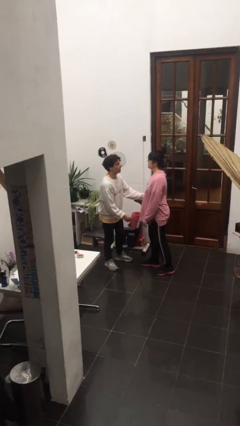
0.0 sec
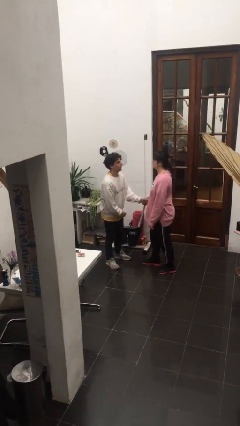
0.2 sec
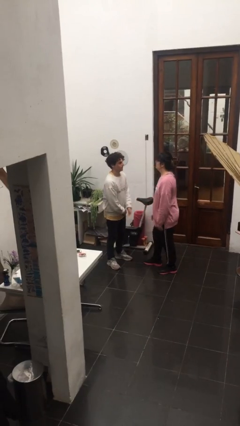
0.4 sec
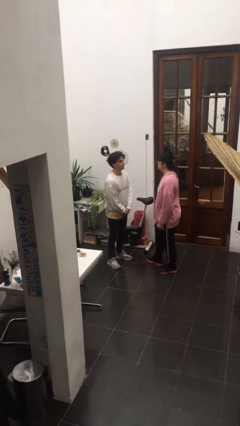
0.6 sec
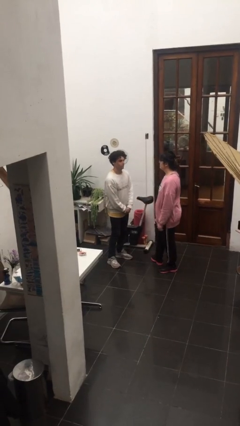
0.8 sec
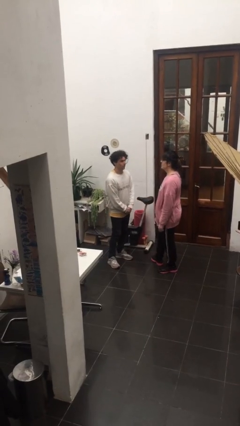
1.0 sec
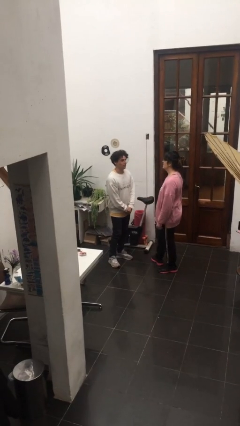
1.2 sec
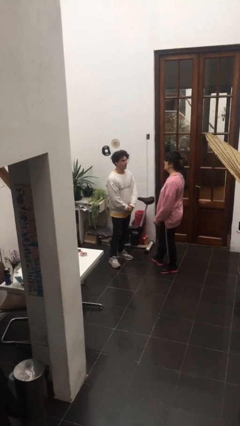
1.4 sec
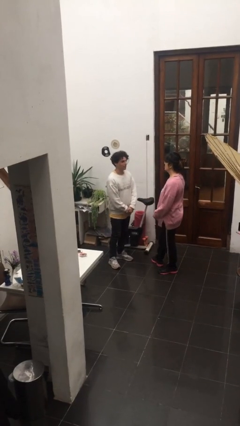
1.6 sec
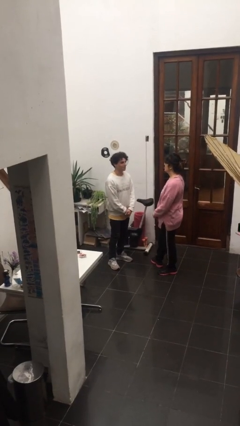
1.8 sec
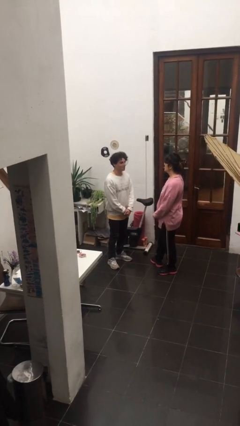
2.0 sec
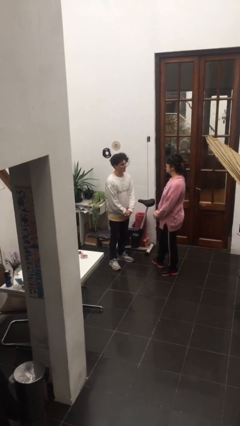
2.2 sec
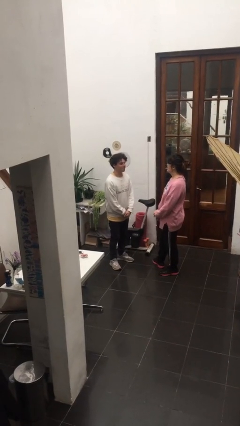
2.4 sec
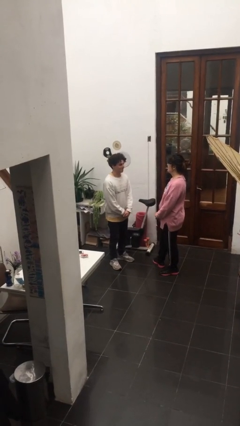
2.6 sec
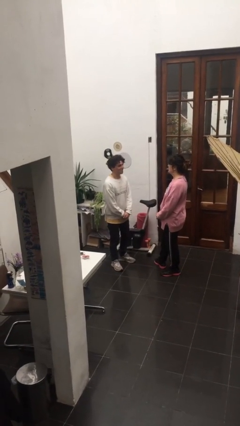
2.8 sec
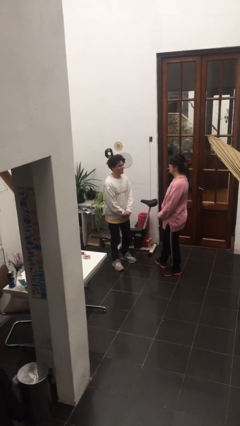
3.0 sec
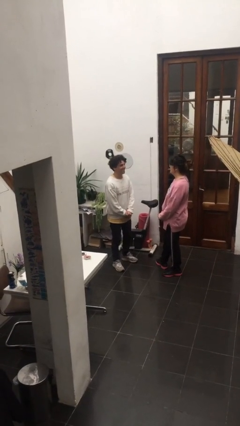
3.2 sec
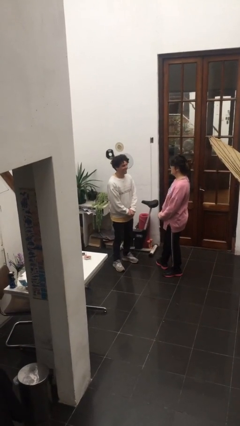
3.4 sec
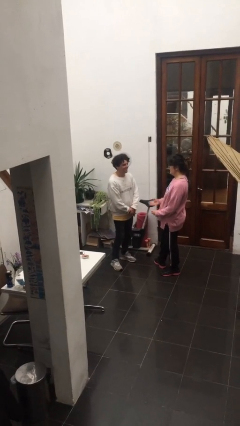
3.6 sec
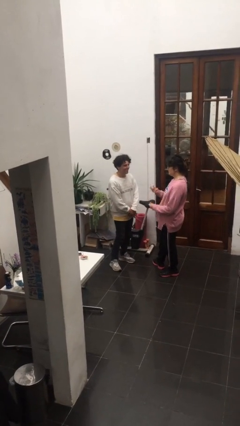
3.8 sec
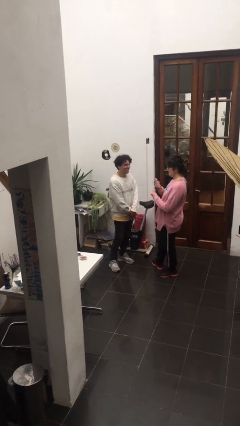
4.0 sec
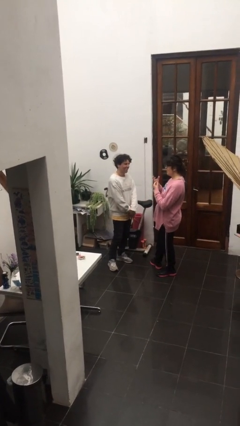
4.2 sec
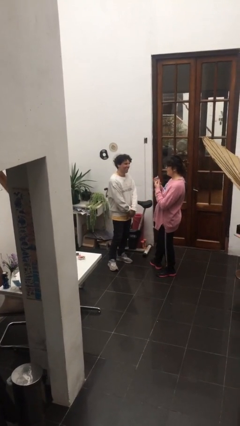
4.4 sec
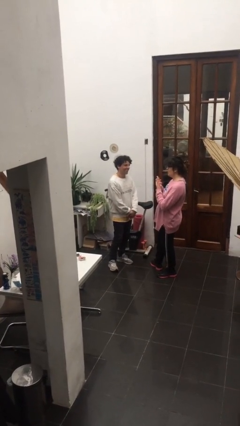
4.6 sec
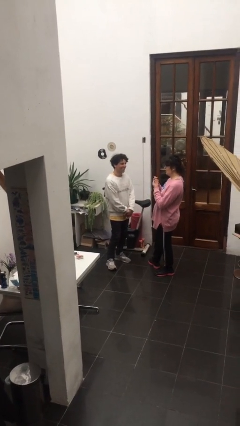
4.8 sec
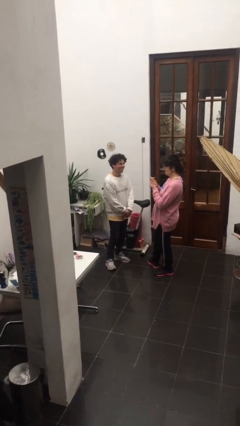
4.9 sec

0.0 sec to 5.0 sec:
person talks to person

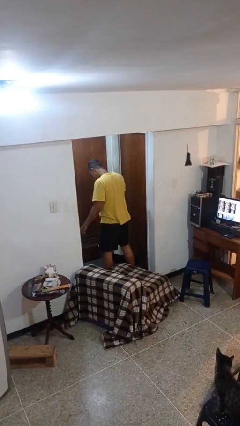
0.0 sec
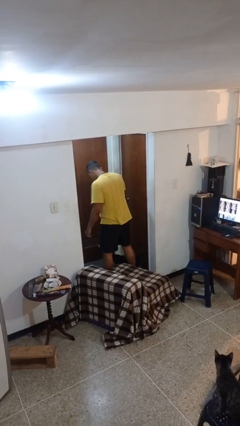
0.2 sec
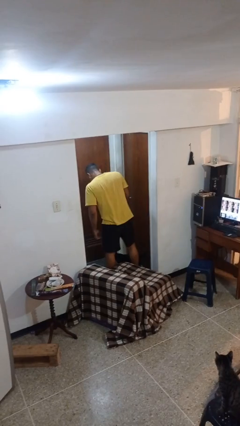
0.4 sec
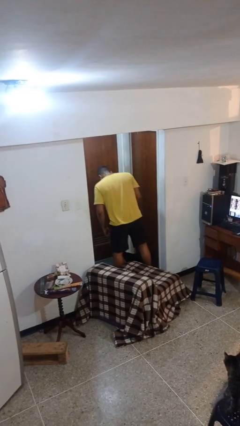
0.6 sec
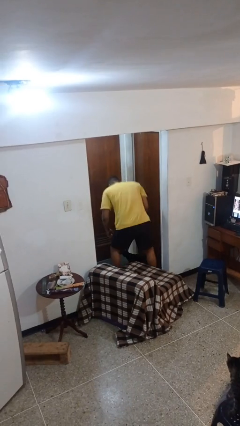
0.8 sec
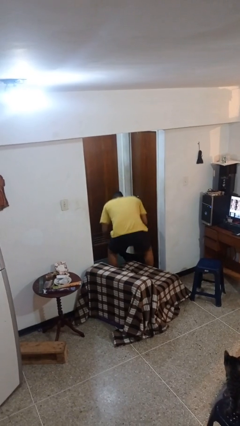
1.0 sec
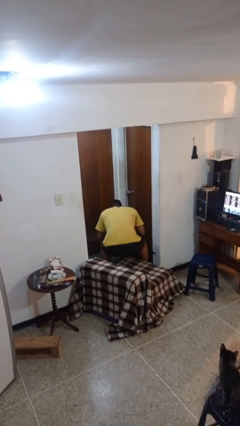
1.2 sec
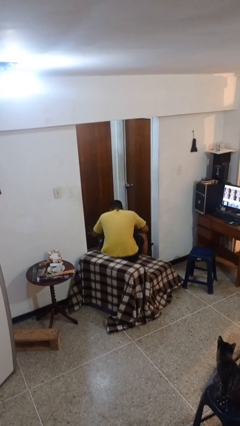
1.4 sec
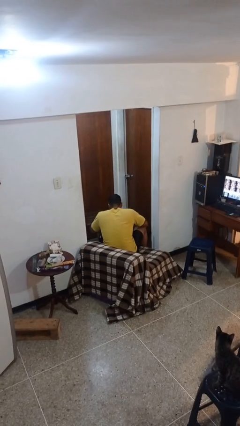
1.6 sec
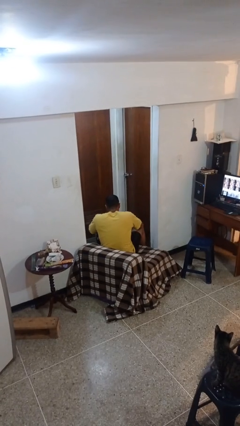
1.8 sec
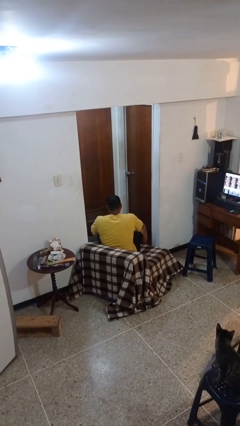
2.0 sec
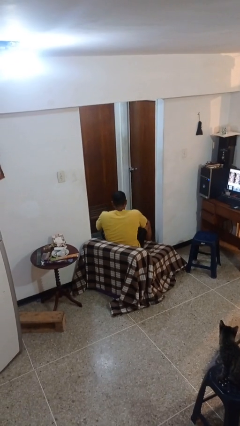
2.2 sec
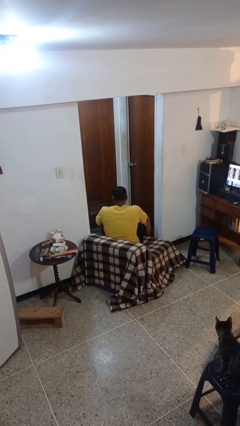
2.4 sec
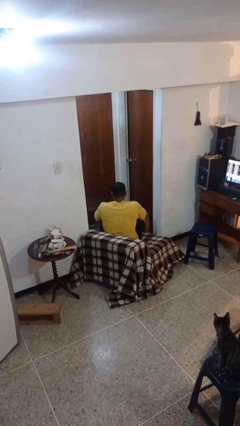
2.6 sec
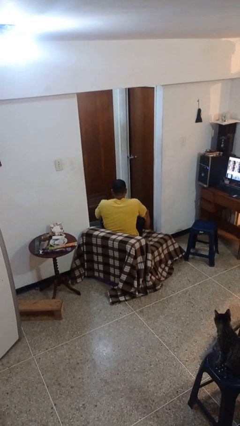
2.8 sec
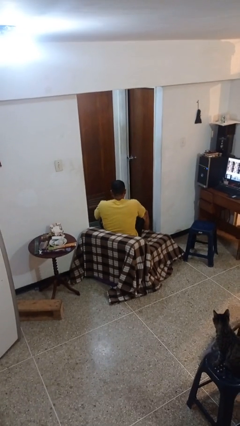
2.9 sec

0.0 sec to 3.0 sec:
person lies down on couch

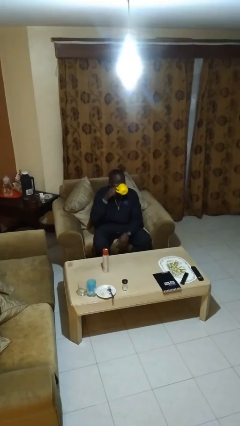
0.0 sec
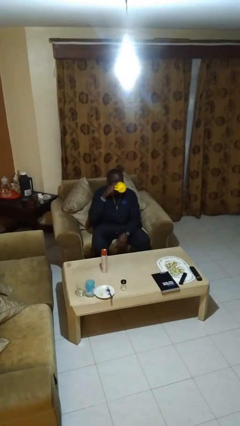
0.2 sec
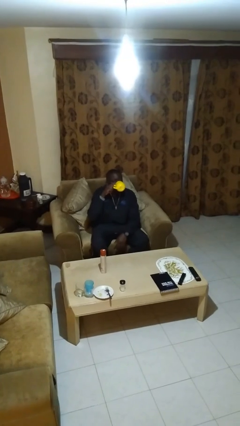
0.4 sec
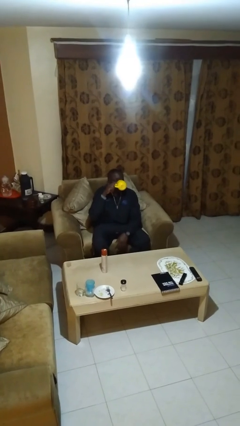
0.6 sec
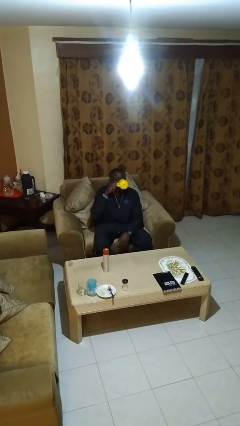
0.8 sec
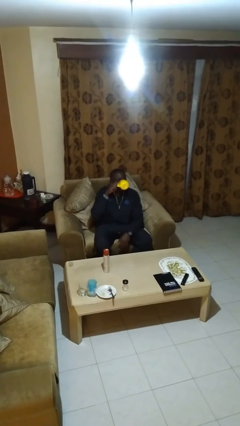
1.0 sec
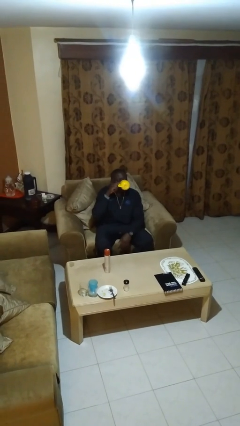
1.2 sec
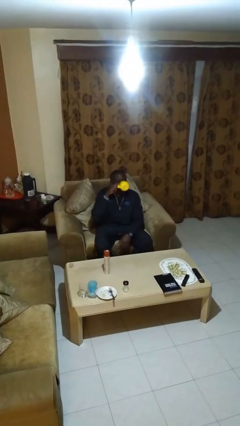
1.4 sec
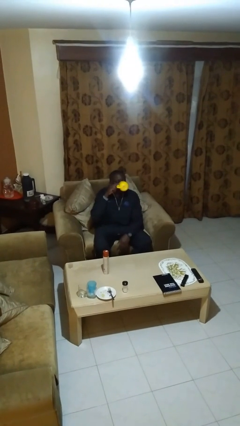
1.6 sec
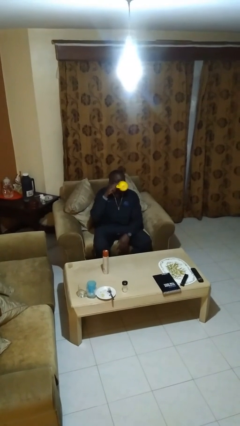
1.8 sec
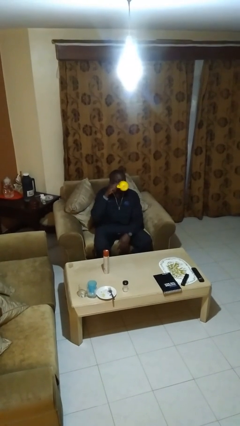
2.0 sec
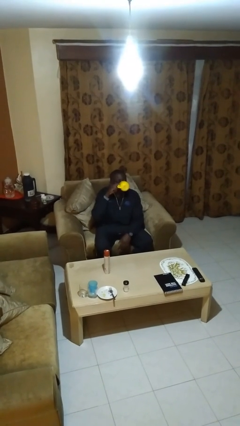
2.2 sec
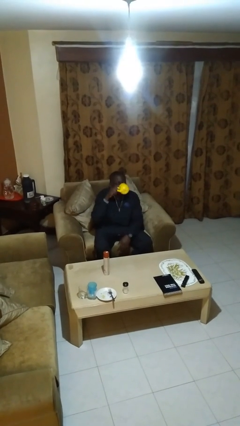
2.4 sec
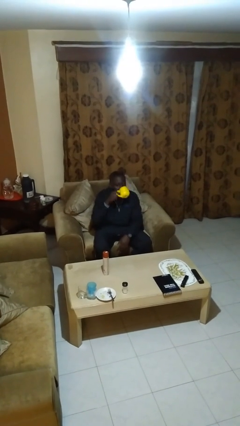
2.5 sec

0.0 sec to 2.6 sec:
person drinks from mug

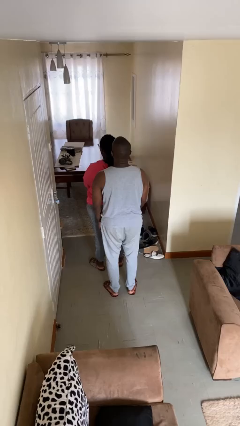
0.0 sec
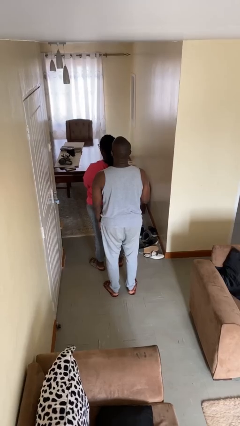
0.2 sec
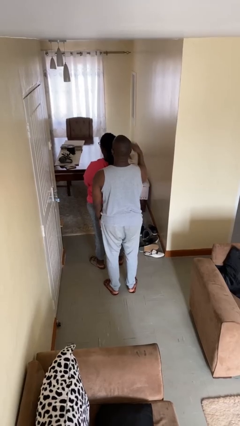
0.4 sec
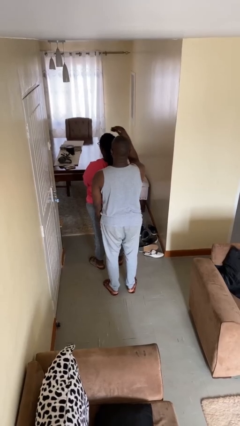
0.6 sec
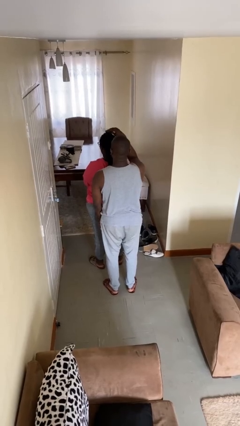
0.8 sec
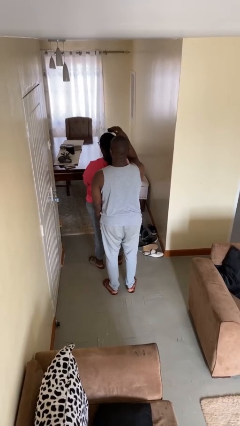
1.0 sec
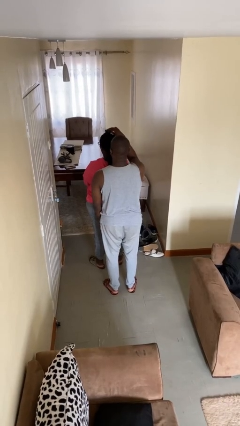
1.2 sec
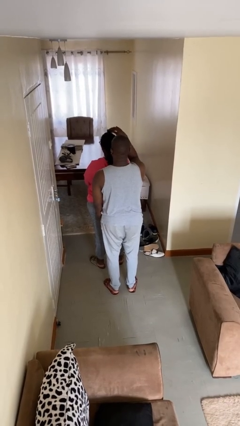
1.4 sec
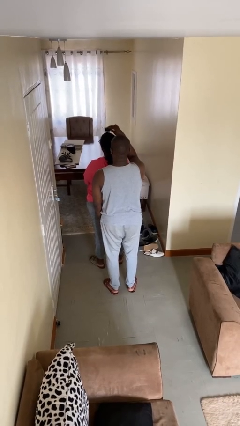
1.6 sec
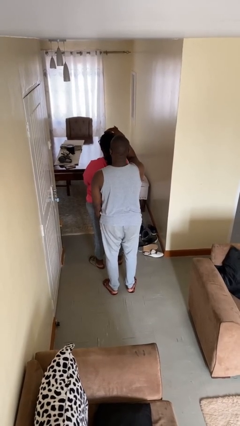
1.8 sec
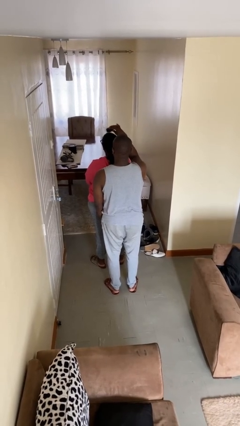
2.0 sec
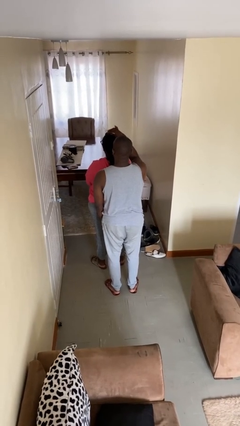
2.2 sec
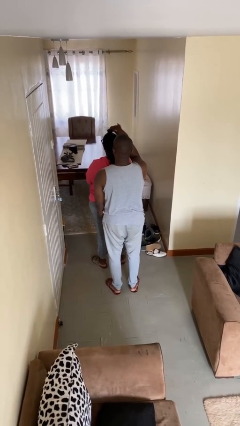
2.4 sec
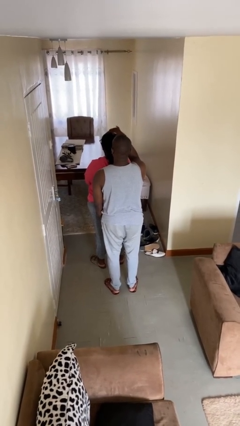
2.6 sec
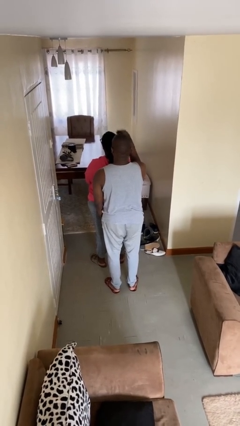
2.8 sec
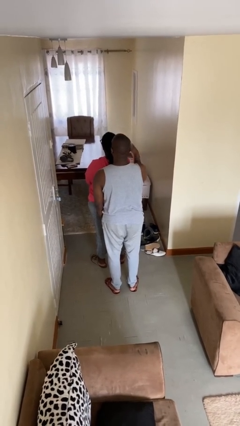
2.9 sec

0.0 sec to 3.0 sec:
person brushes hair of person

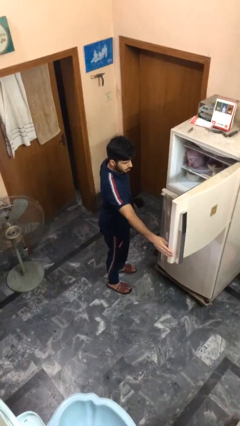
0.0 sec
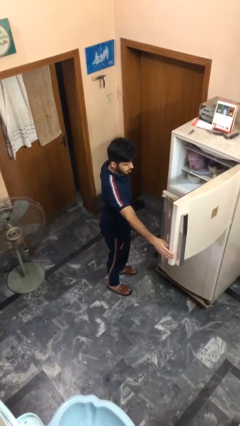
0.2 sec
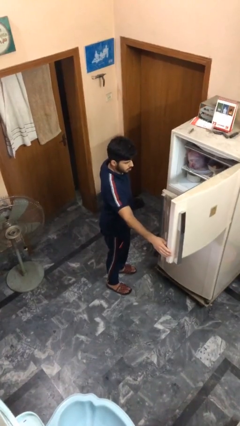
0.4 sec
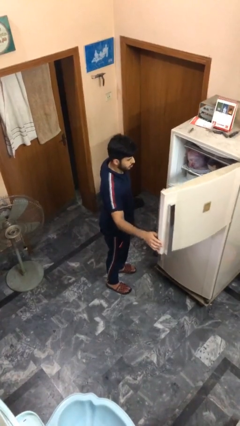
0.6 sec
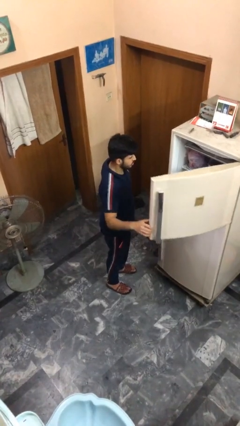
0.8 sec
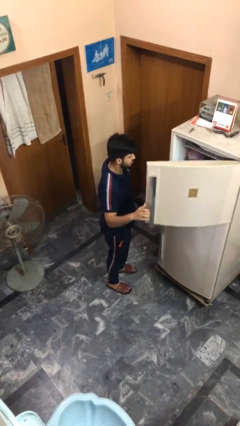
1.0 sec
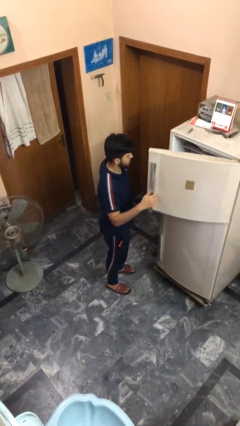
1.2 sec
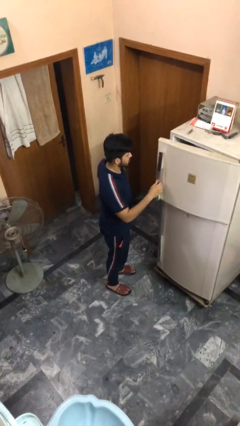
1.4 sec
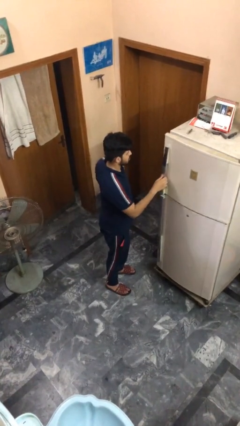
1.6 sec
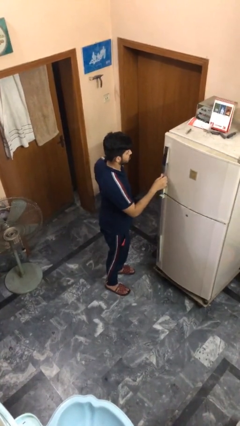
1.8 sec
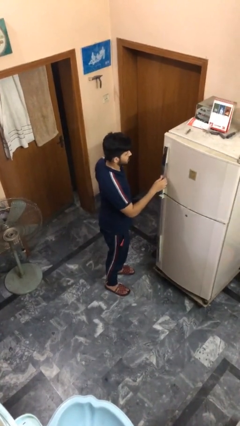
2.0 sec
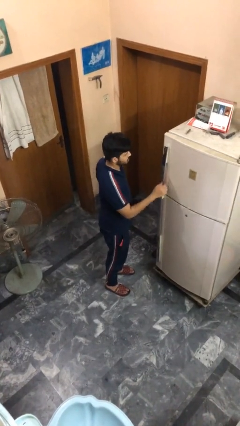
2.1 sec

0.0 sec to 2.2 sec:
person closes refrigerator

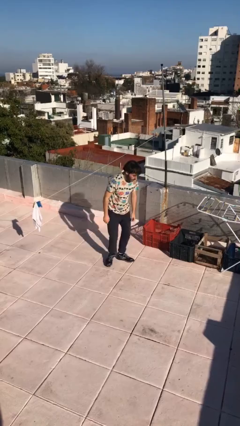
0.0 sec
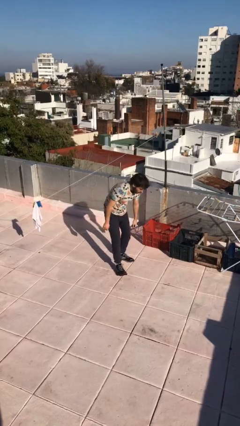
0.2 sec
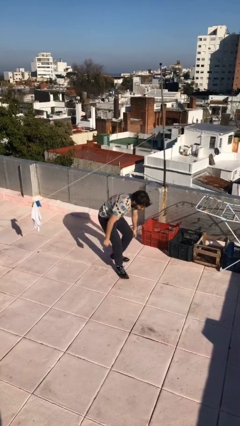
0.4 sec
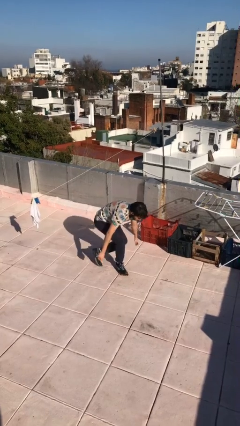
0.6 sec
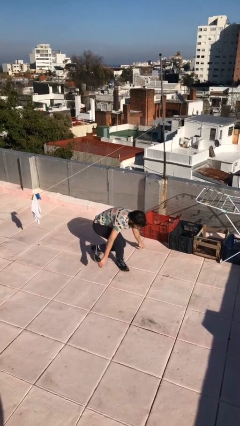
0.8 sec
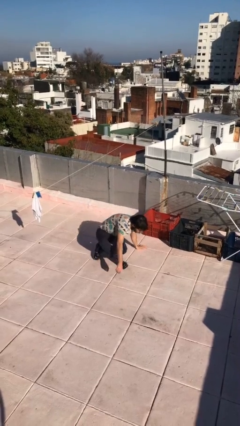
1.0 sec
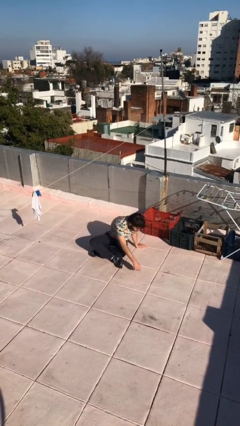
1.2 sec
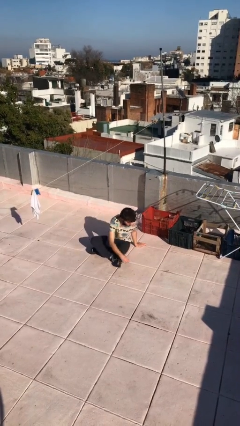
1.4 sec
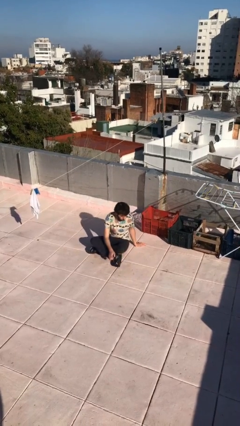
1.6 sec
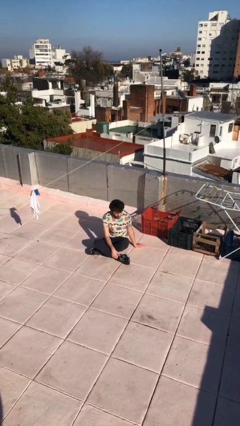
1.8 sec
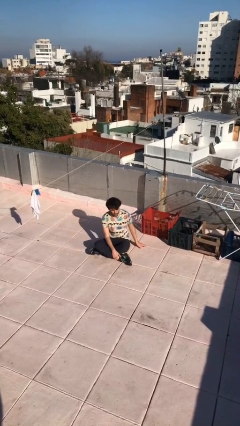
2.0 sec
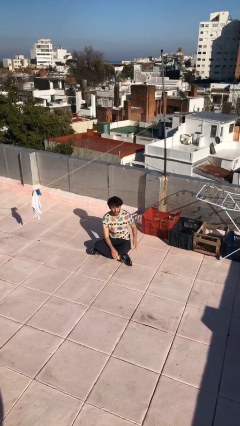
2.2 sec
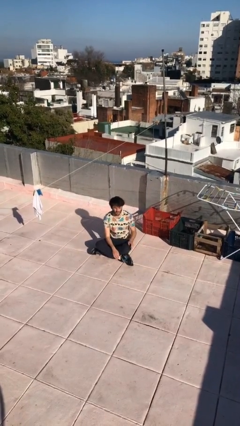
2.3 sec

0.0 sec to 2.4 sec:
person sits crisscross
